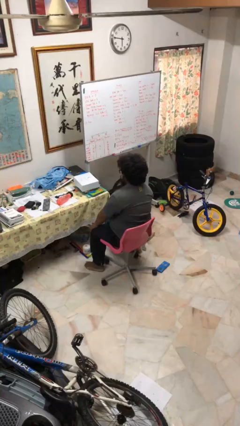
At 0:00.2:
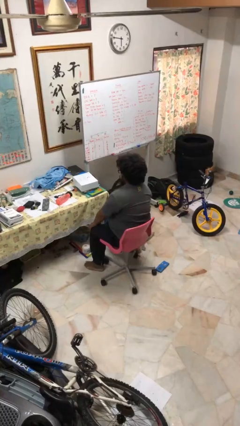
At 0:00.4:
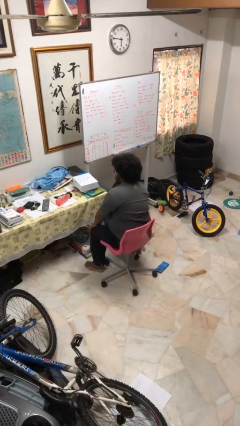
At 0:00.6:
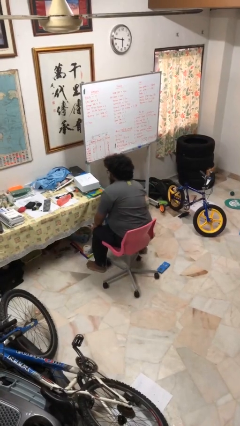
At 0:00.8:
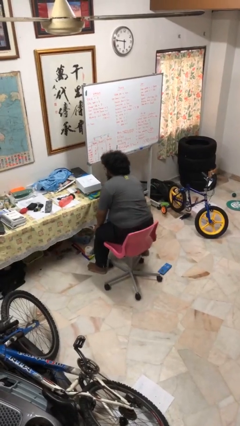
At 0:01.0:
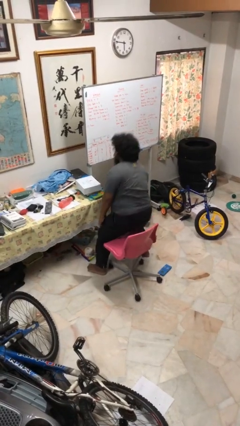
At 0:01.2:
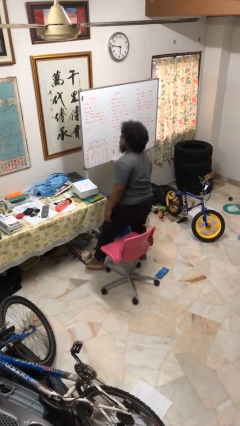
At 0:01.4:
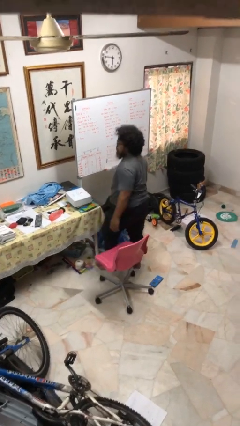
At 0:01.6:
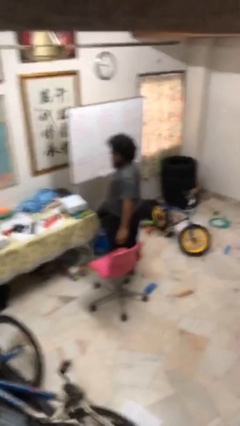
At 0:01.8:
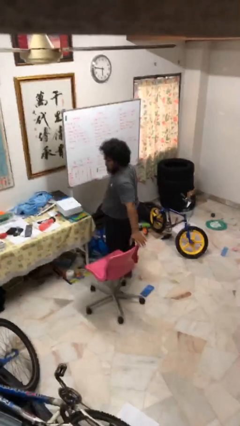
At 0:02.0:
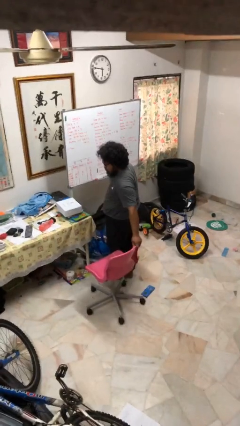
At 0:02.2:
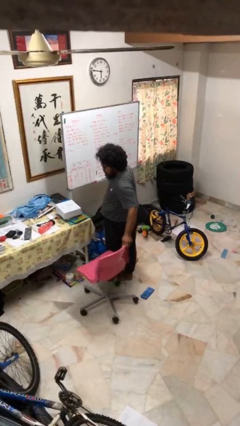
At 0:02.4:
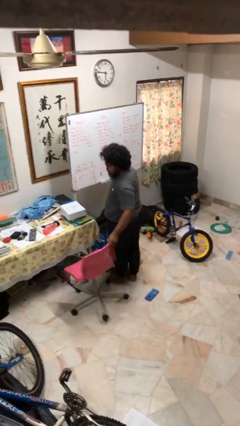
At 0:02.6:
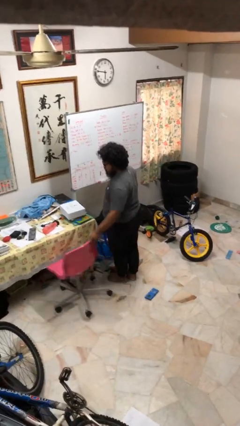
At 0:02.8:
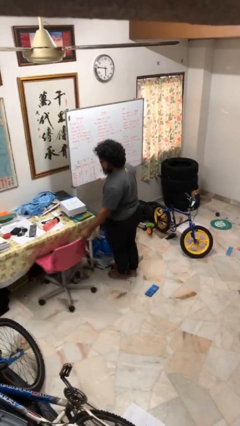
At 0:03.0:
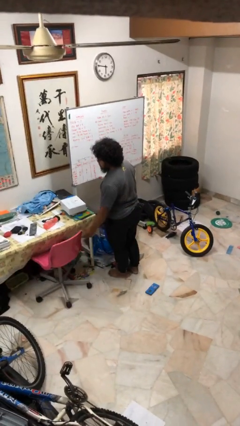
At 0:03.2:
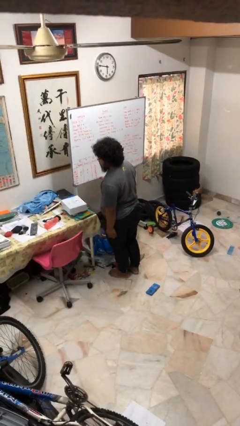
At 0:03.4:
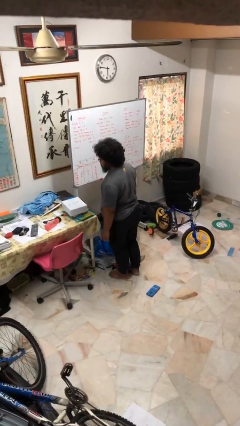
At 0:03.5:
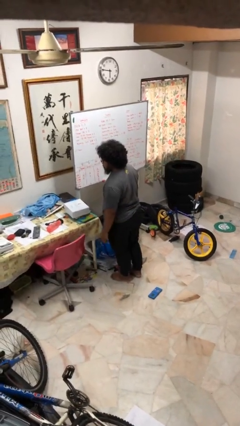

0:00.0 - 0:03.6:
person stands up

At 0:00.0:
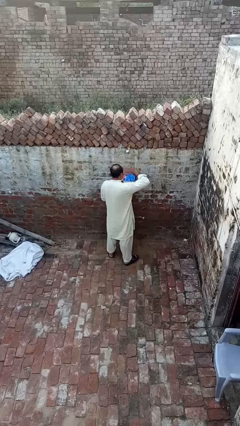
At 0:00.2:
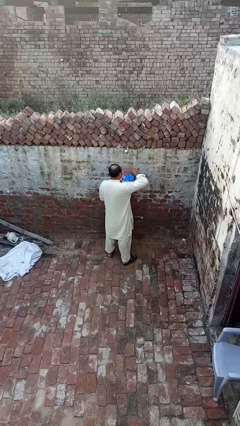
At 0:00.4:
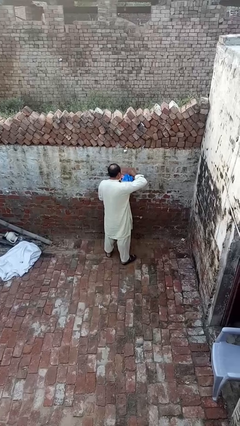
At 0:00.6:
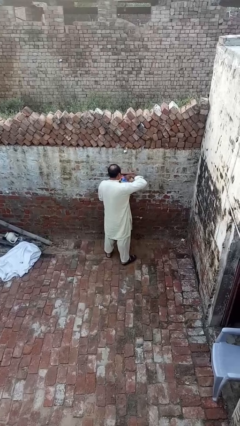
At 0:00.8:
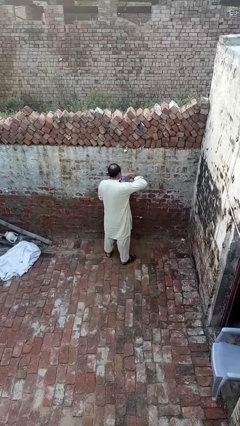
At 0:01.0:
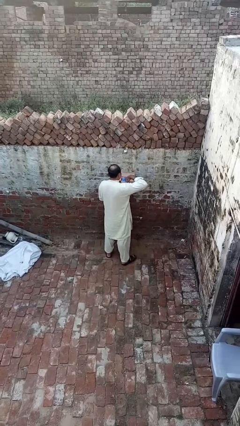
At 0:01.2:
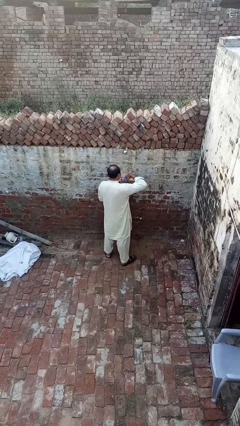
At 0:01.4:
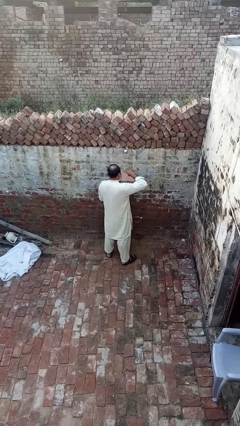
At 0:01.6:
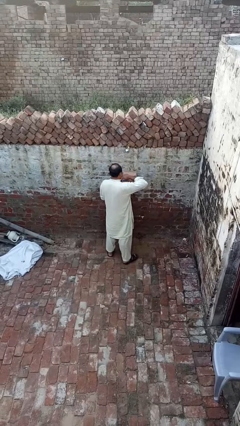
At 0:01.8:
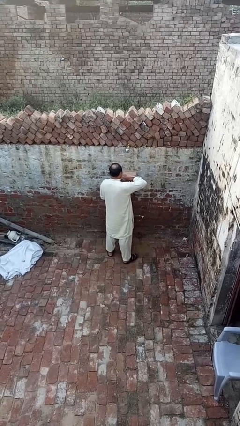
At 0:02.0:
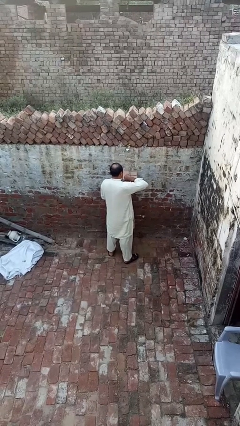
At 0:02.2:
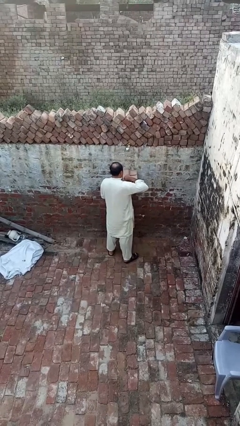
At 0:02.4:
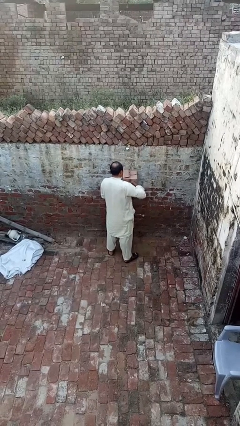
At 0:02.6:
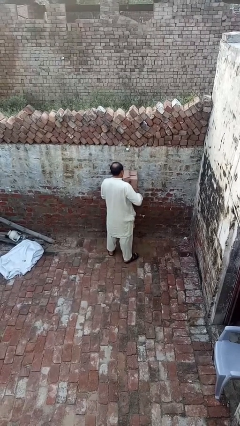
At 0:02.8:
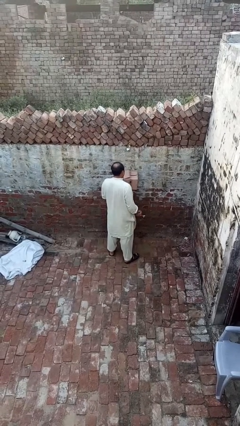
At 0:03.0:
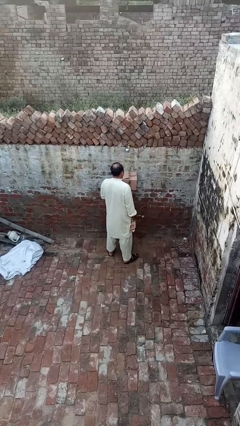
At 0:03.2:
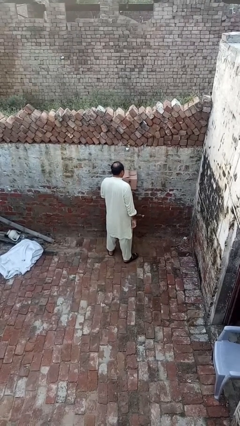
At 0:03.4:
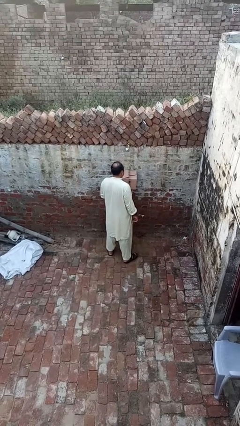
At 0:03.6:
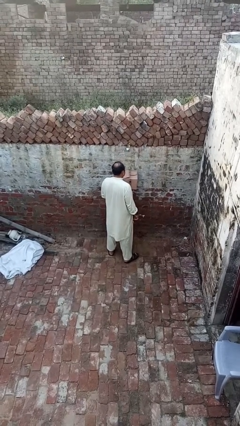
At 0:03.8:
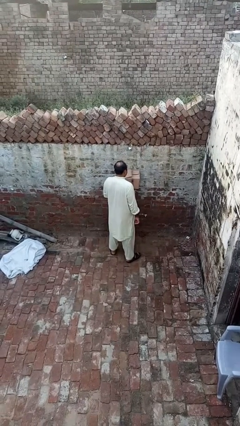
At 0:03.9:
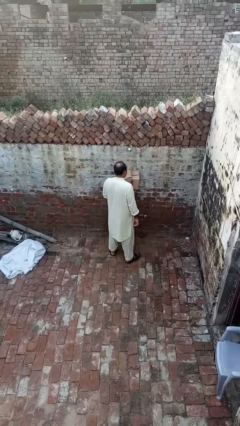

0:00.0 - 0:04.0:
person closes mailbox

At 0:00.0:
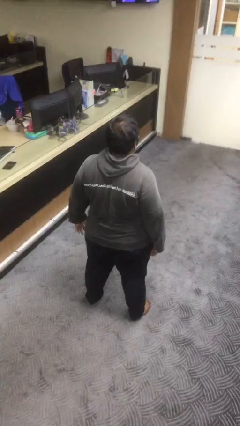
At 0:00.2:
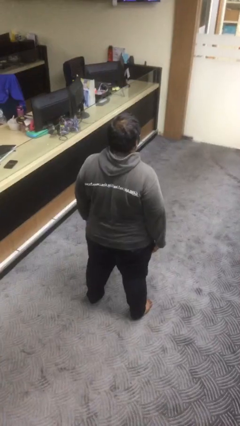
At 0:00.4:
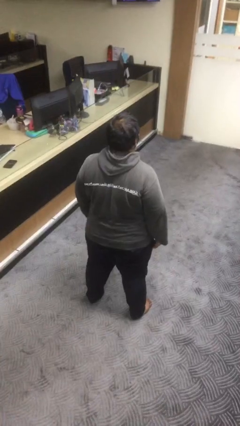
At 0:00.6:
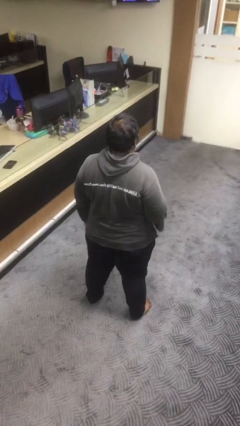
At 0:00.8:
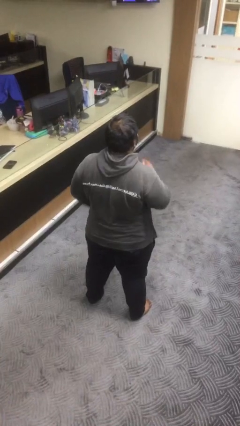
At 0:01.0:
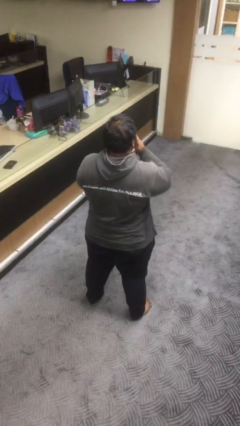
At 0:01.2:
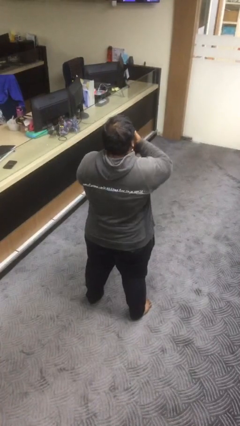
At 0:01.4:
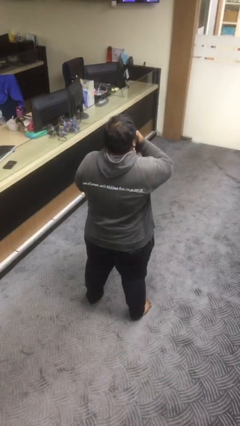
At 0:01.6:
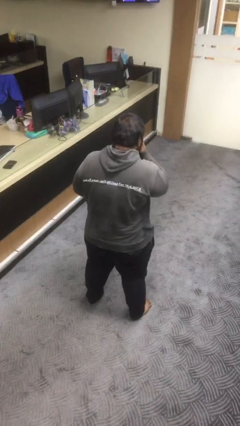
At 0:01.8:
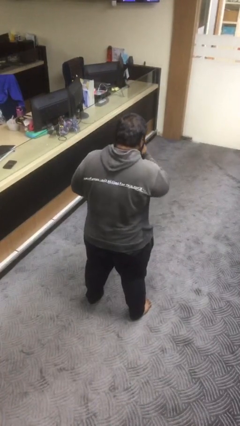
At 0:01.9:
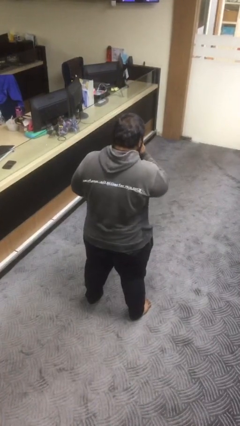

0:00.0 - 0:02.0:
person sneezes into hand

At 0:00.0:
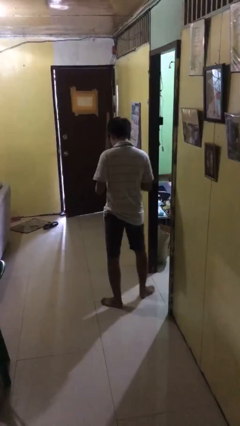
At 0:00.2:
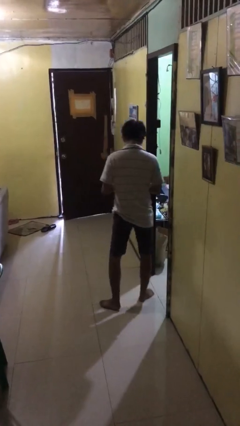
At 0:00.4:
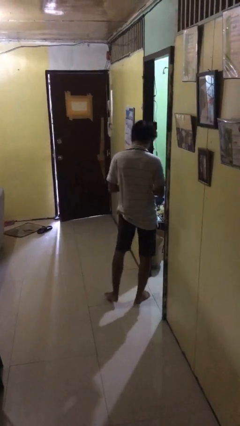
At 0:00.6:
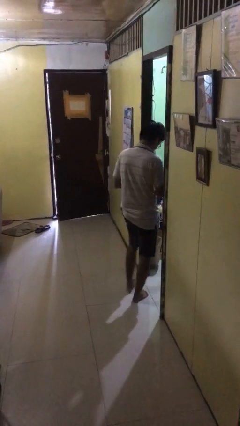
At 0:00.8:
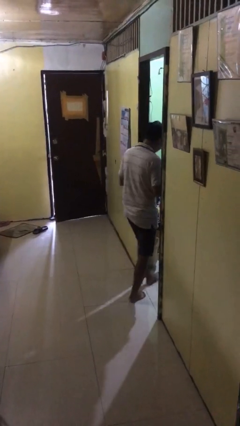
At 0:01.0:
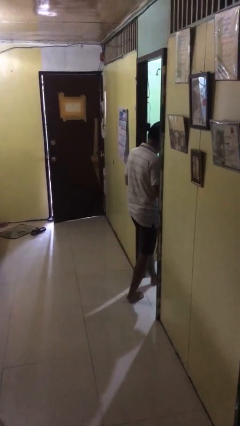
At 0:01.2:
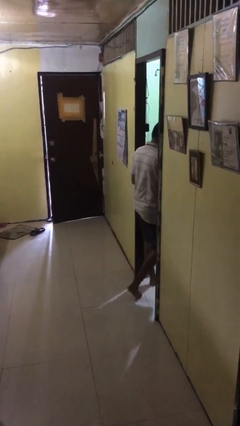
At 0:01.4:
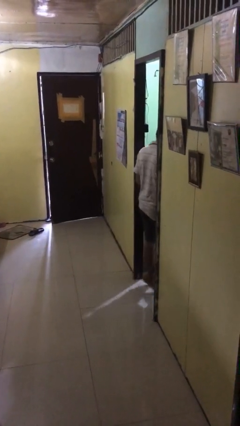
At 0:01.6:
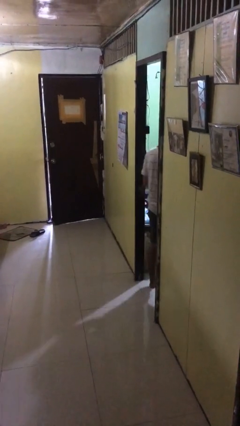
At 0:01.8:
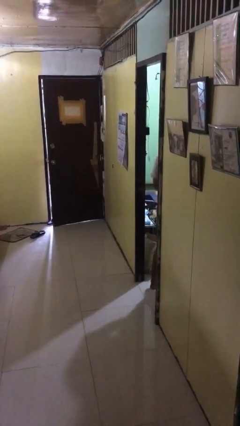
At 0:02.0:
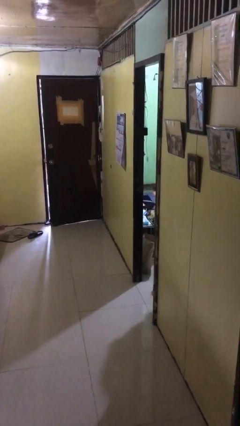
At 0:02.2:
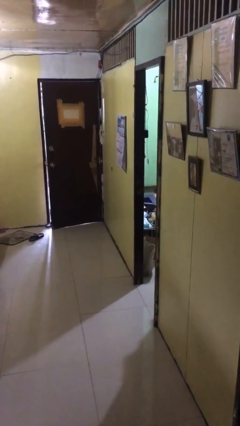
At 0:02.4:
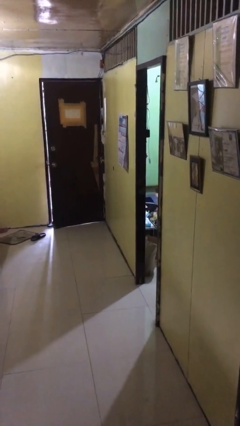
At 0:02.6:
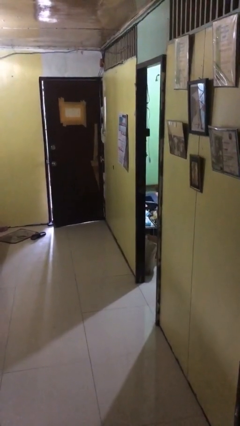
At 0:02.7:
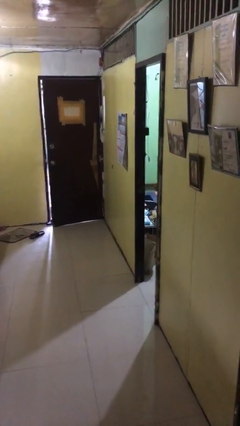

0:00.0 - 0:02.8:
person exits scene through structure

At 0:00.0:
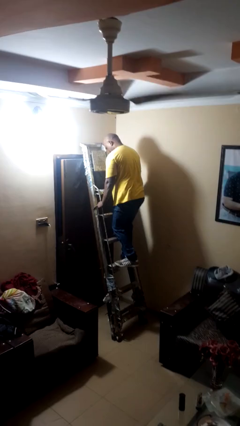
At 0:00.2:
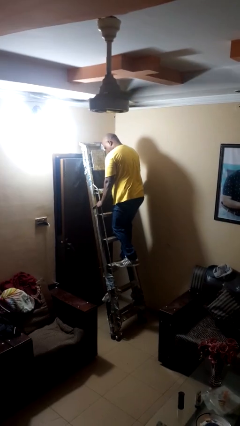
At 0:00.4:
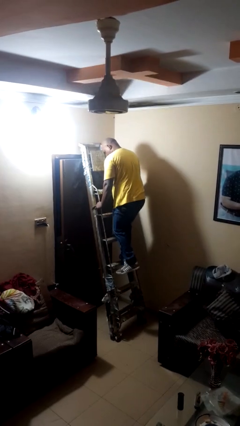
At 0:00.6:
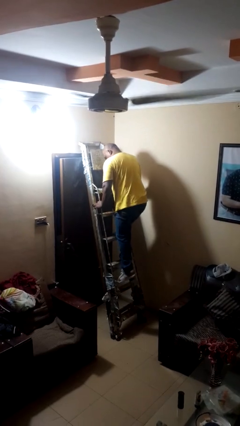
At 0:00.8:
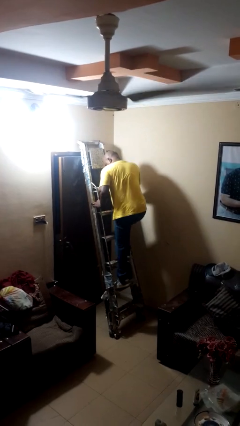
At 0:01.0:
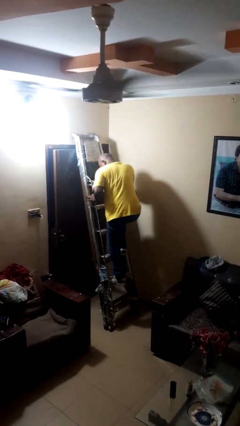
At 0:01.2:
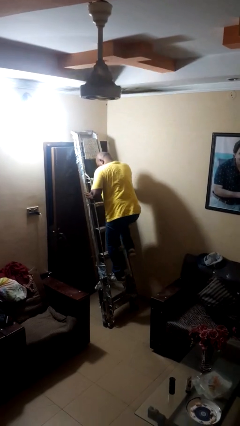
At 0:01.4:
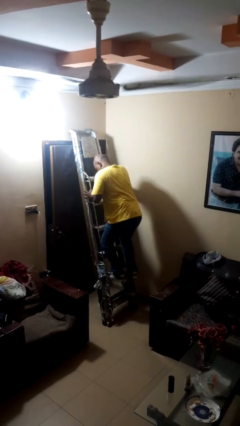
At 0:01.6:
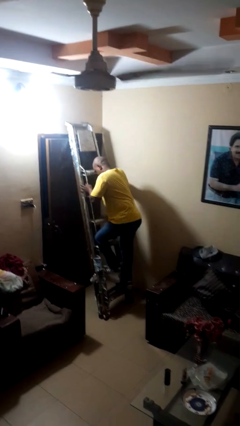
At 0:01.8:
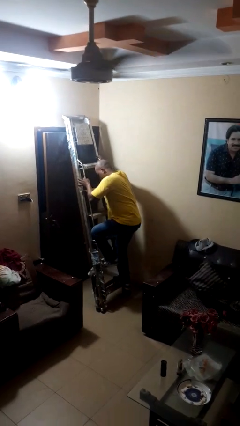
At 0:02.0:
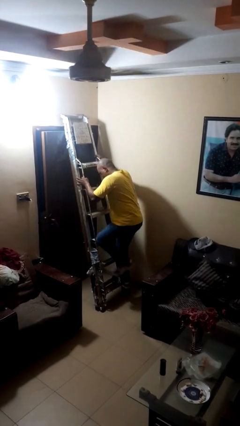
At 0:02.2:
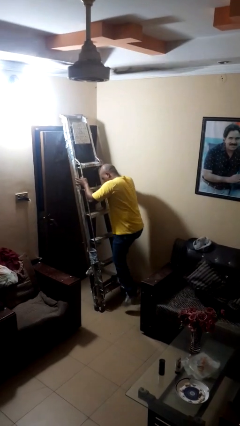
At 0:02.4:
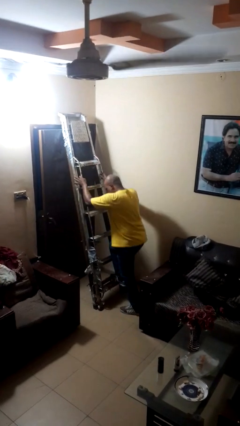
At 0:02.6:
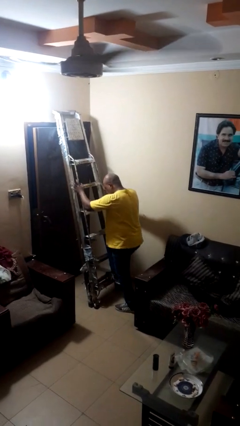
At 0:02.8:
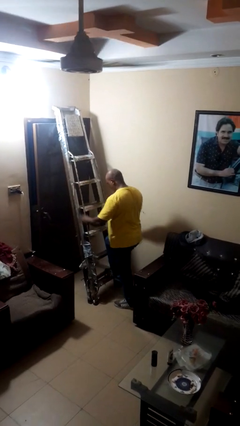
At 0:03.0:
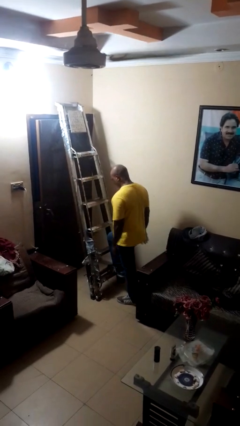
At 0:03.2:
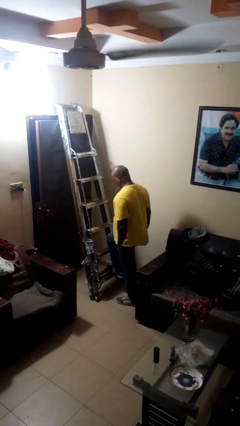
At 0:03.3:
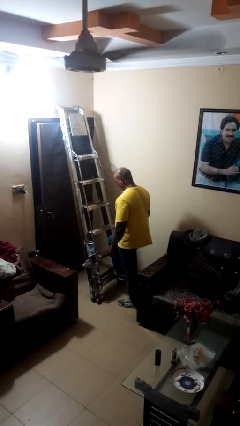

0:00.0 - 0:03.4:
person climbs down stairs

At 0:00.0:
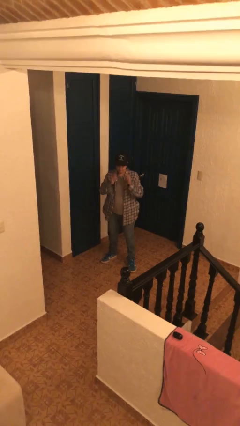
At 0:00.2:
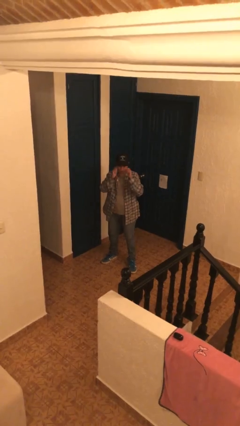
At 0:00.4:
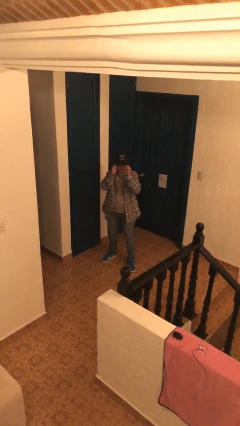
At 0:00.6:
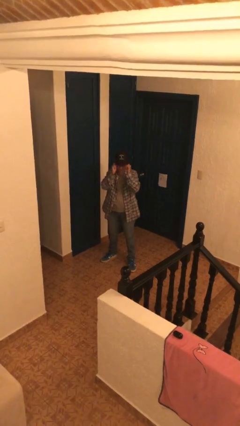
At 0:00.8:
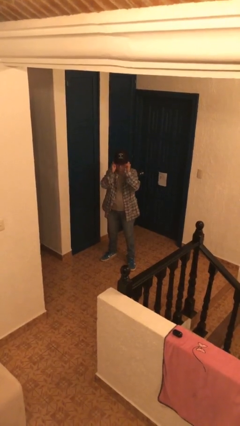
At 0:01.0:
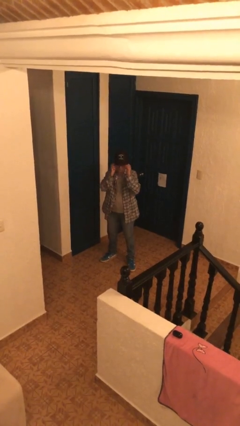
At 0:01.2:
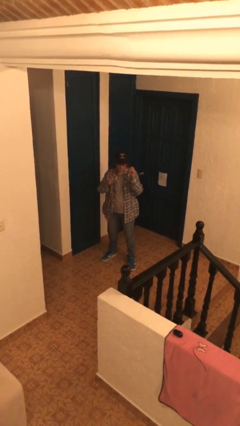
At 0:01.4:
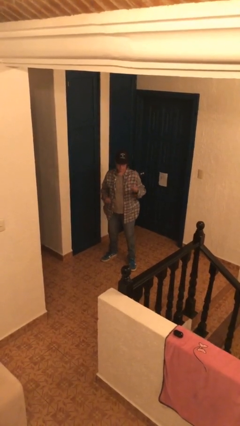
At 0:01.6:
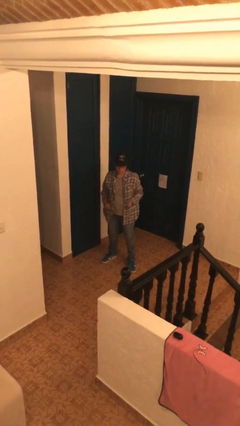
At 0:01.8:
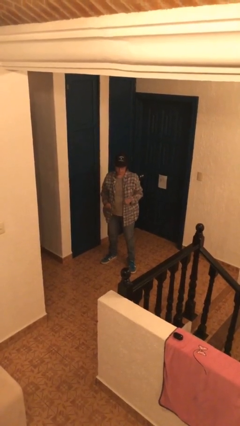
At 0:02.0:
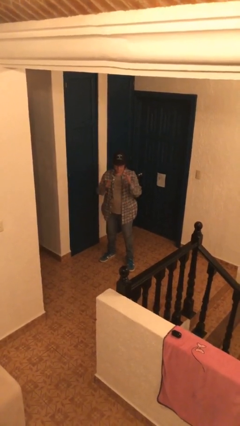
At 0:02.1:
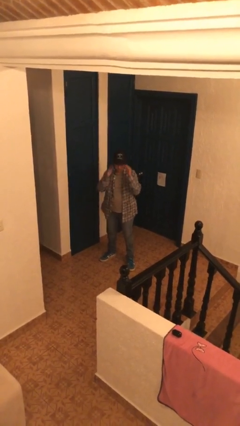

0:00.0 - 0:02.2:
person puts on glasses
